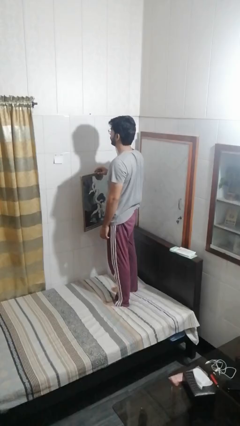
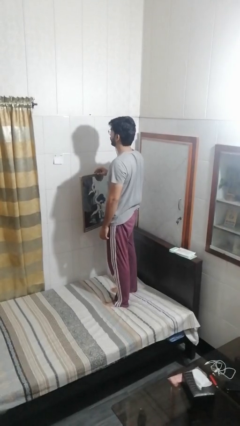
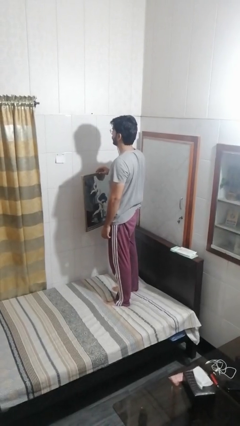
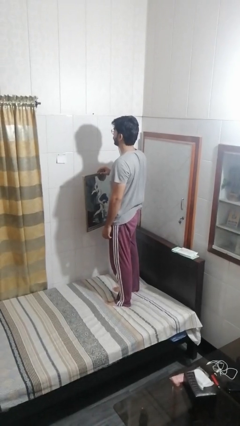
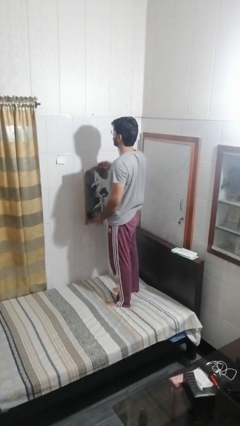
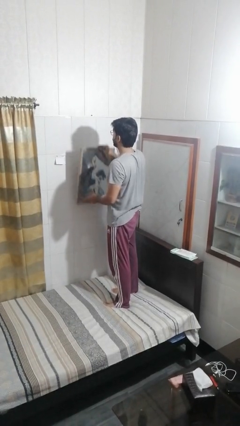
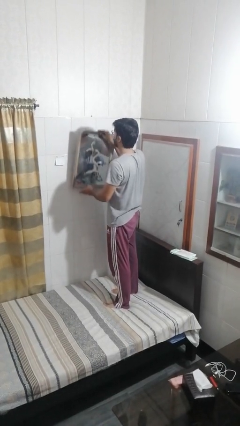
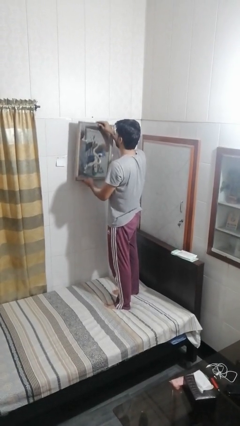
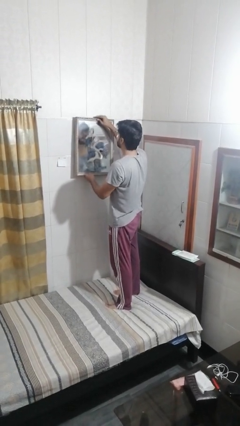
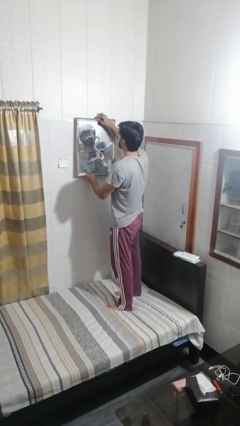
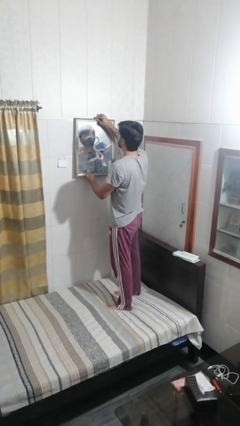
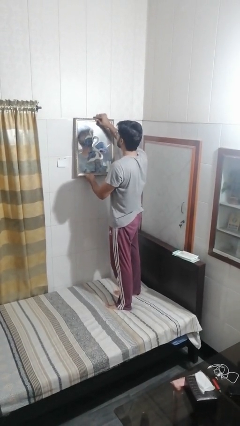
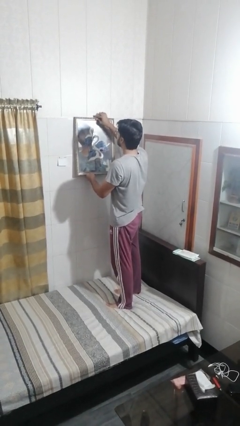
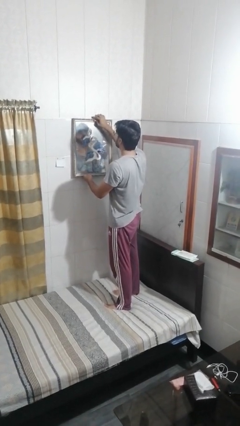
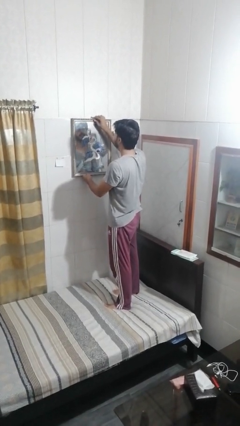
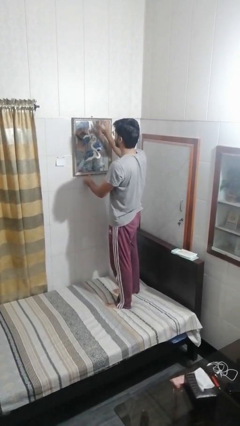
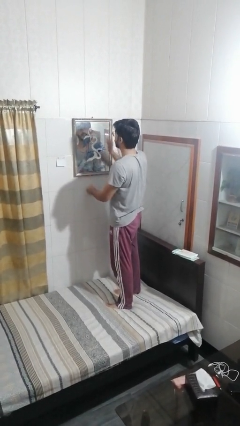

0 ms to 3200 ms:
person puts up picture frame

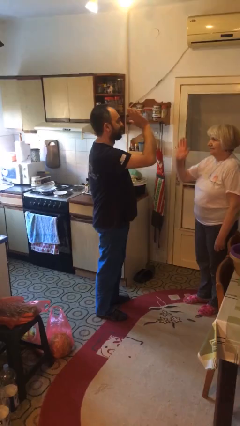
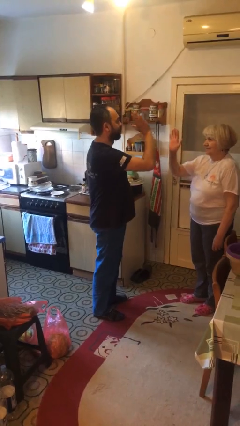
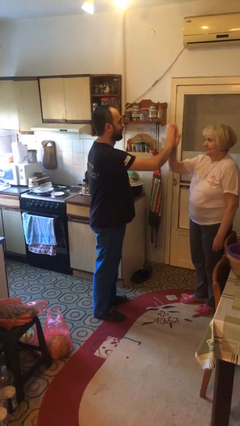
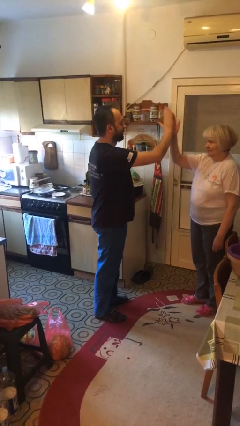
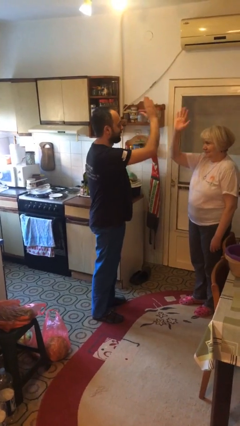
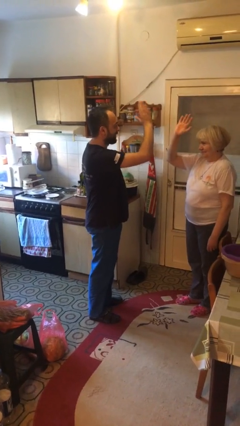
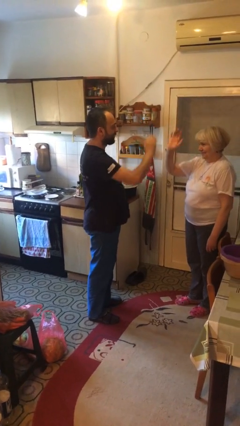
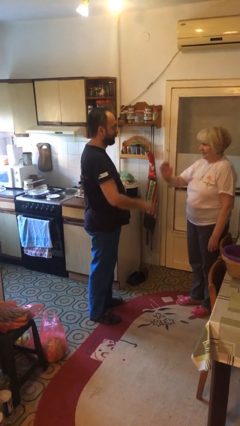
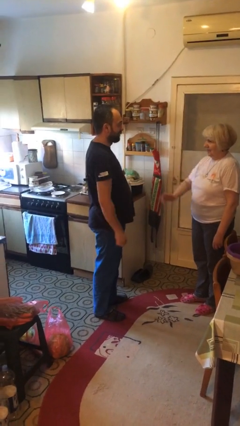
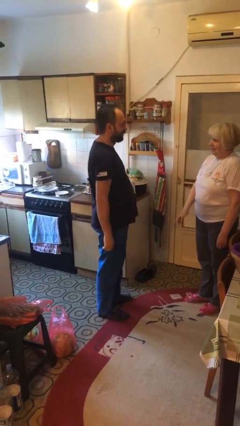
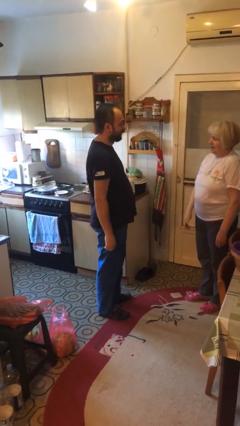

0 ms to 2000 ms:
person highfives hand

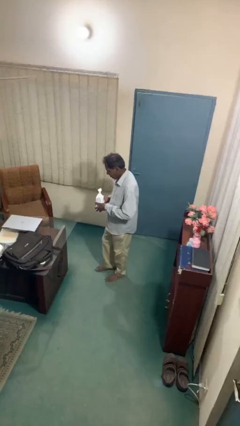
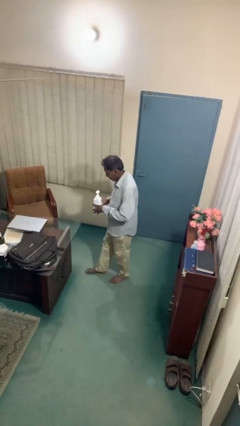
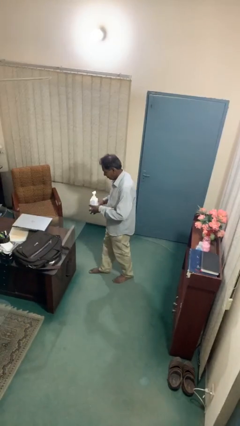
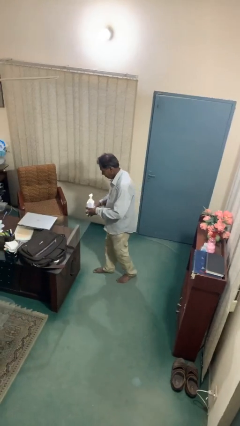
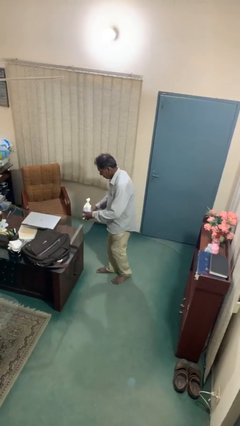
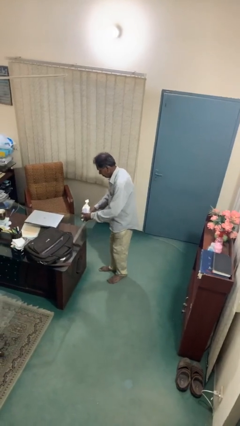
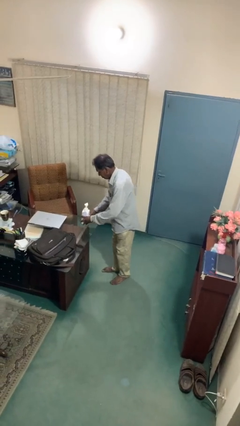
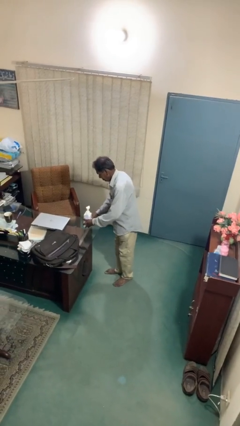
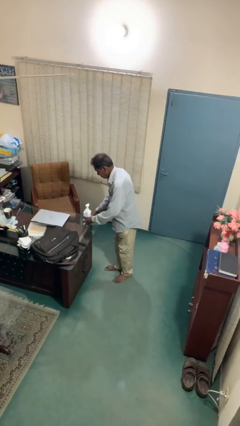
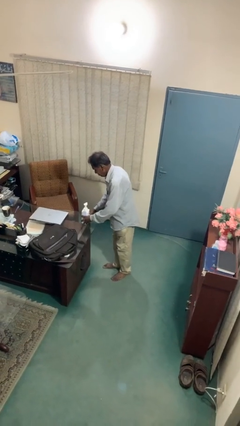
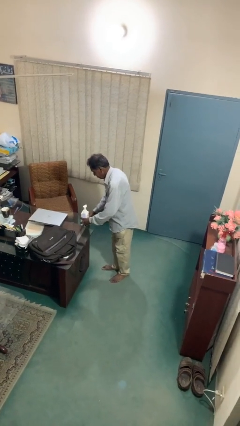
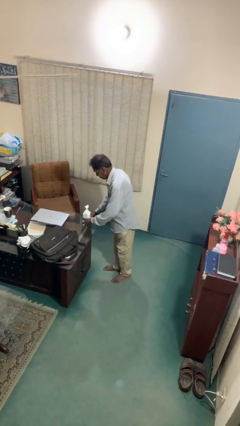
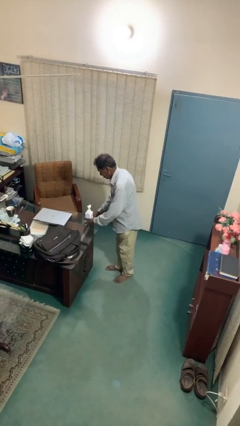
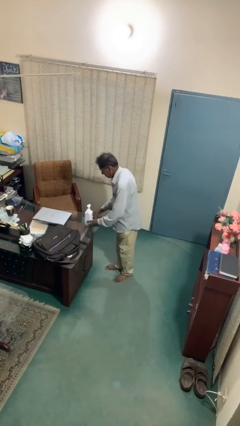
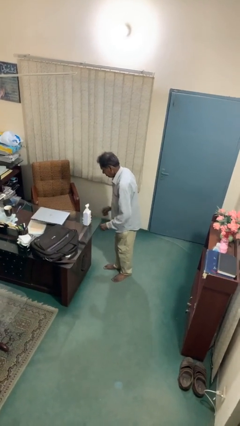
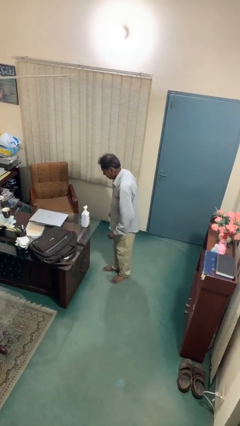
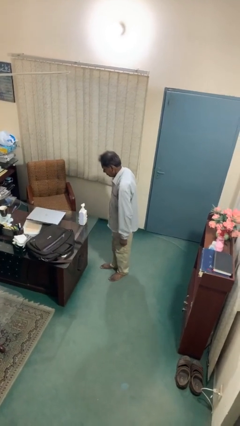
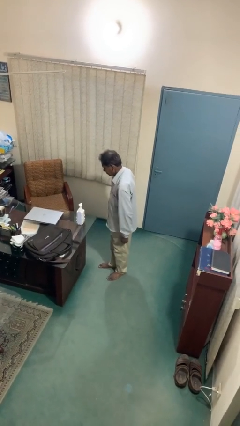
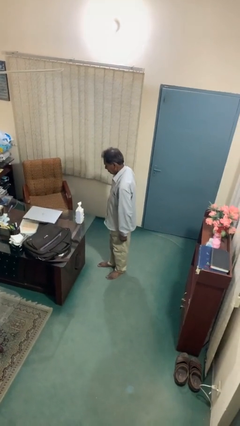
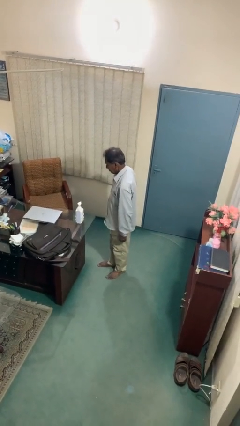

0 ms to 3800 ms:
person puts down object on table

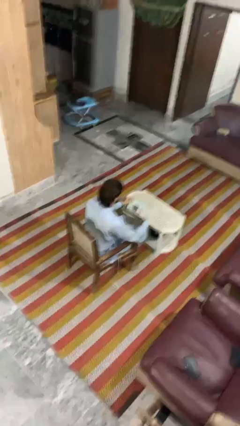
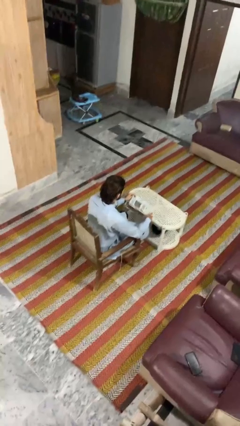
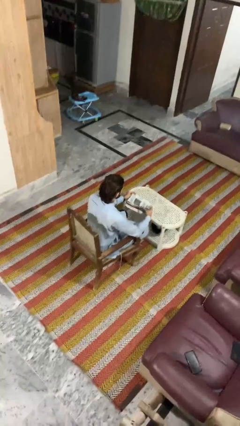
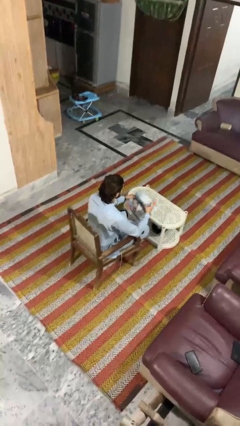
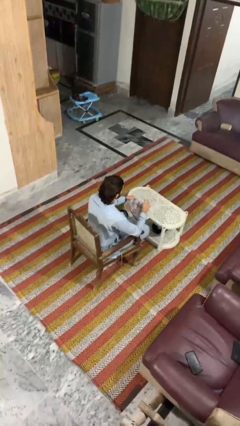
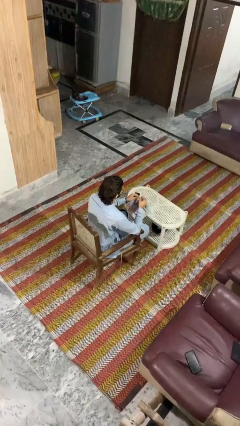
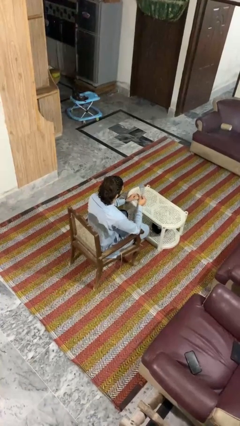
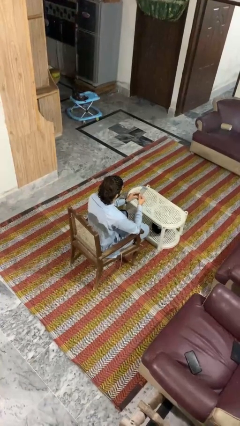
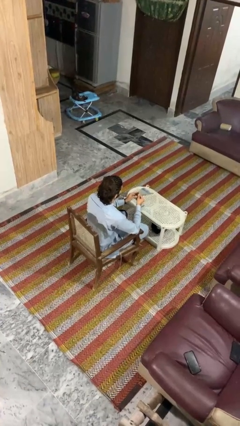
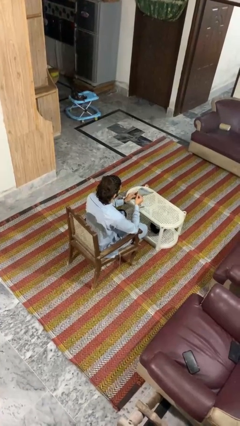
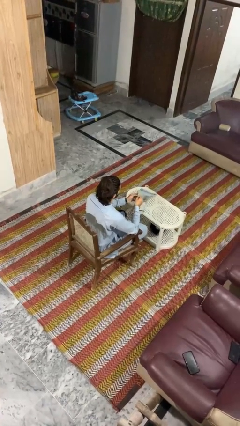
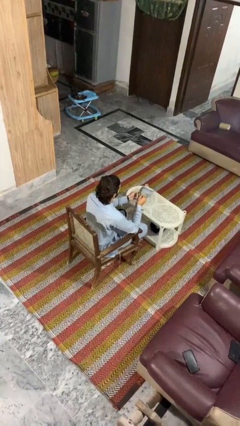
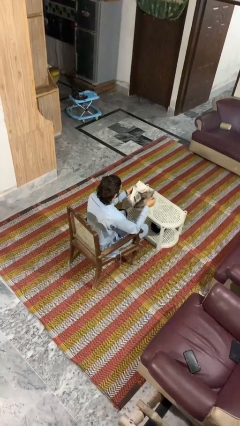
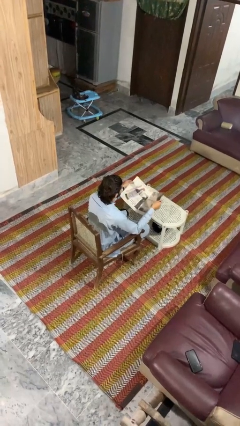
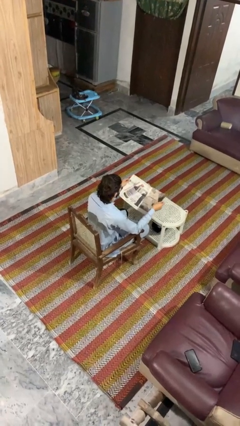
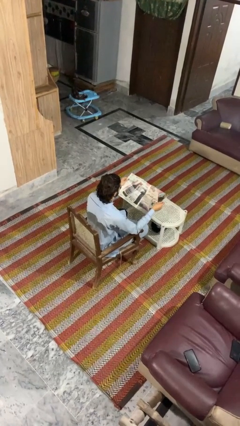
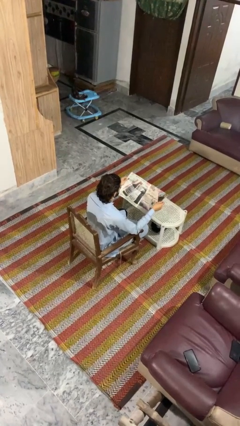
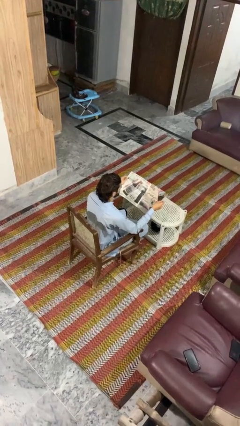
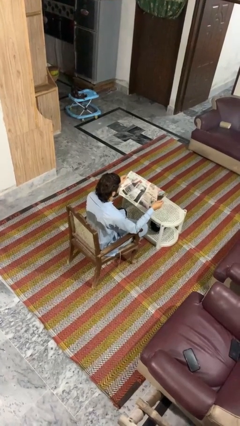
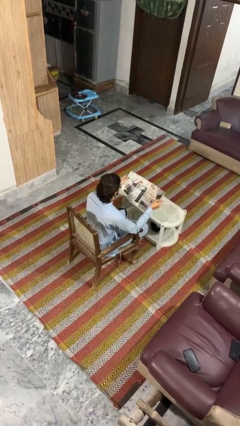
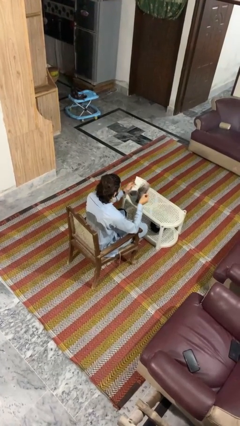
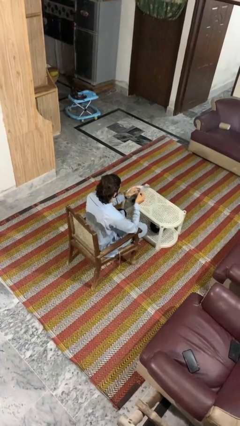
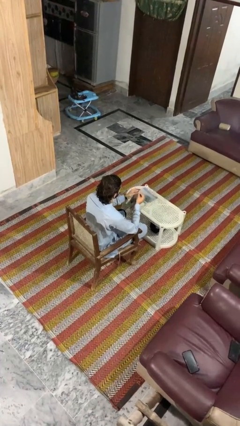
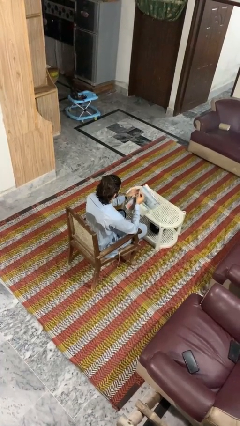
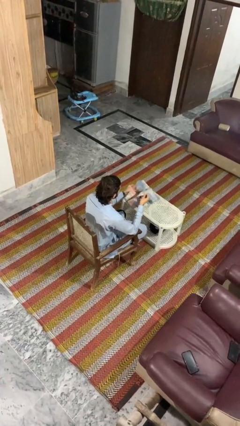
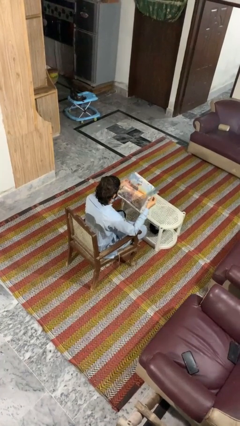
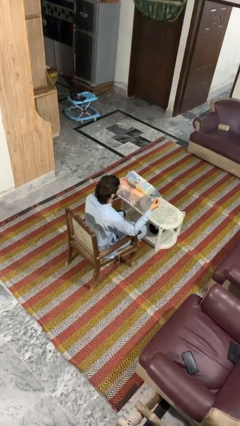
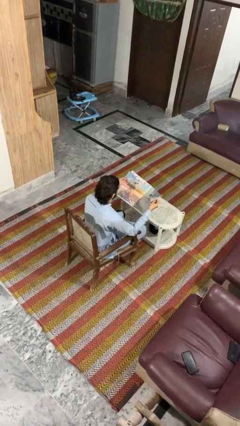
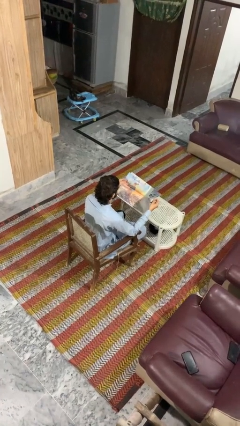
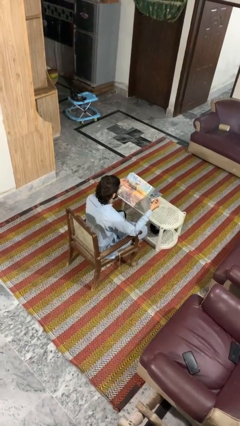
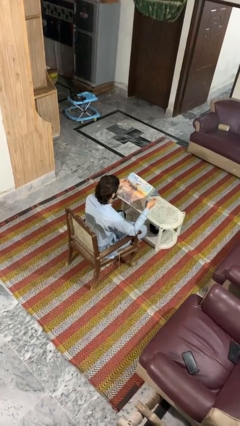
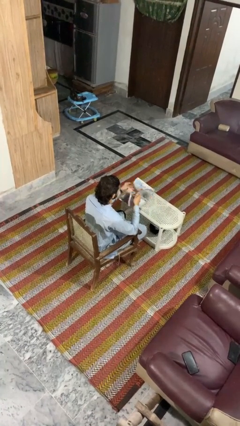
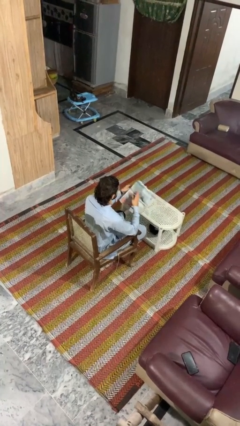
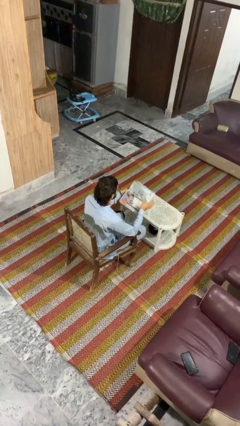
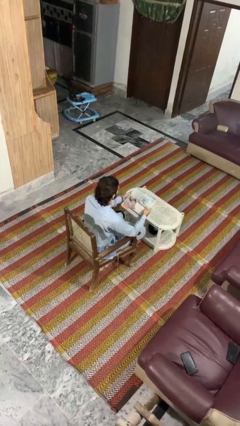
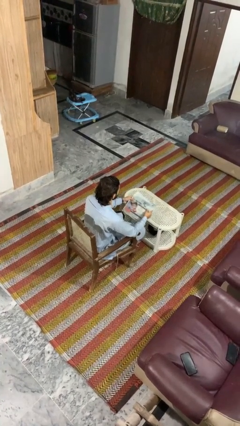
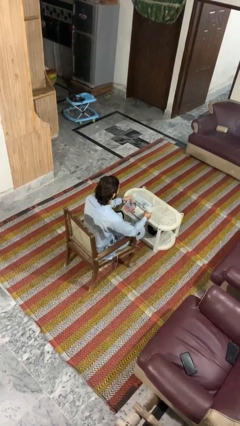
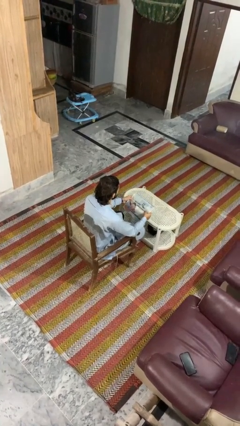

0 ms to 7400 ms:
person reads magazine

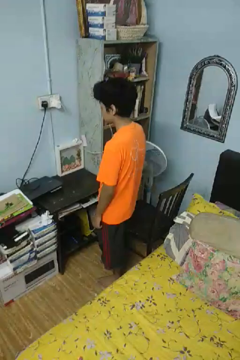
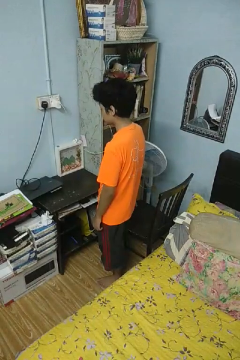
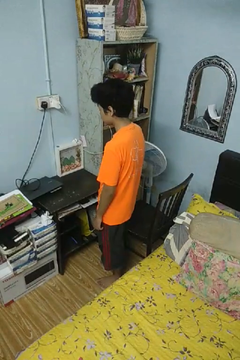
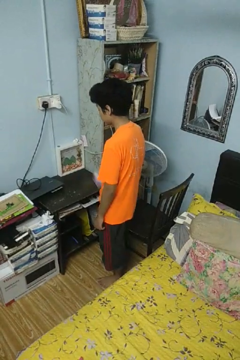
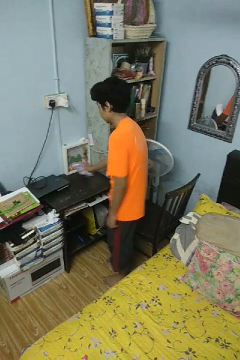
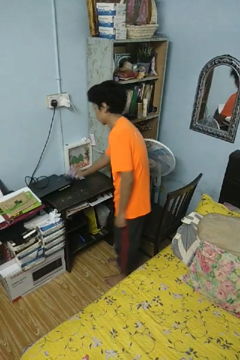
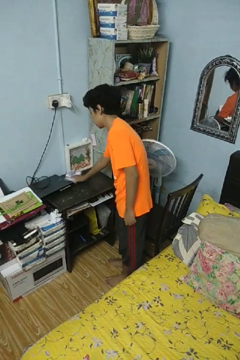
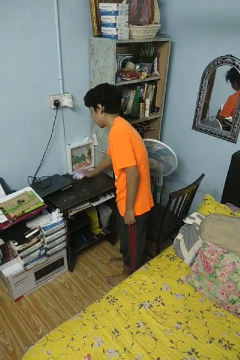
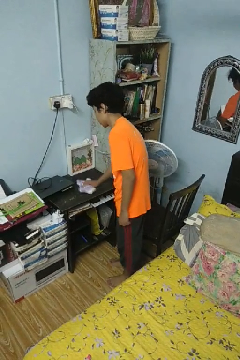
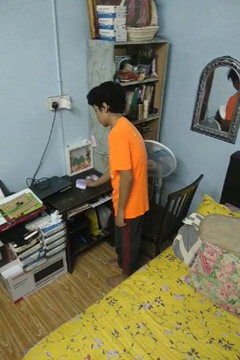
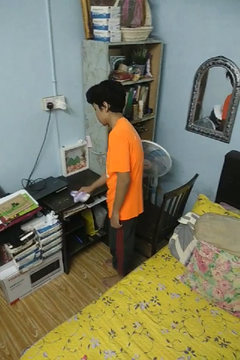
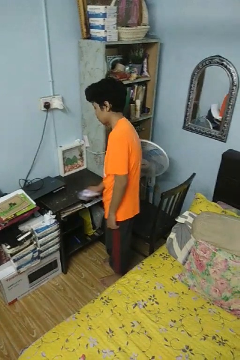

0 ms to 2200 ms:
person cleans table with rag
